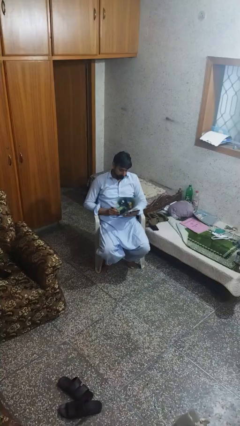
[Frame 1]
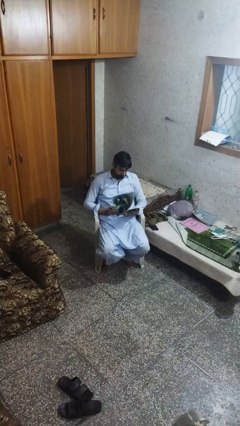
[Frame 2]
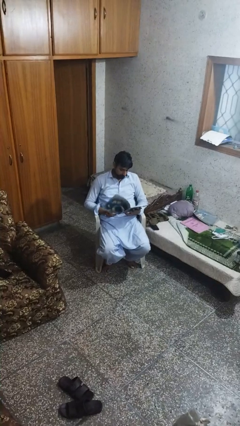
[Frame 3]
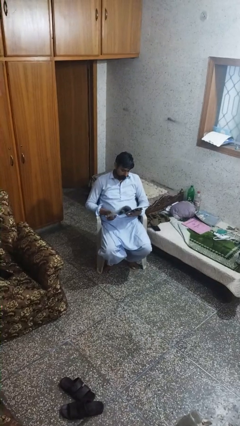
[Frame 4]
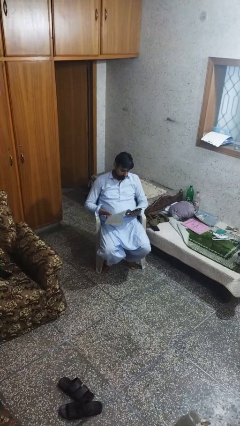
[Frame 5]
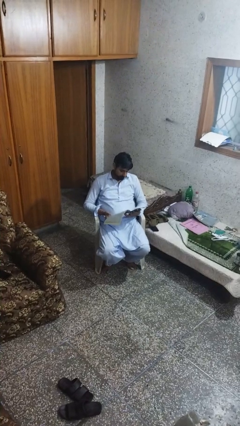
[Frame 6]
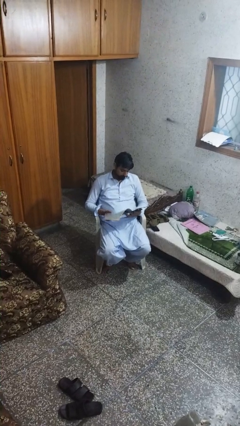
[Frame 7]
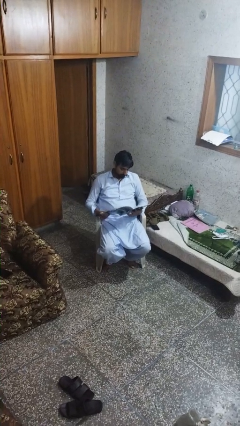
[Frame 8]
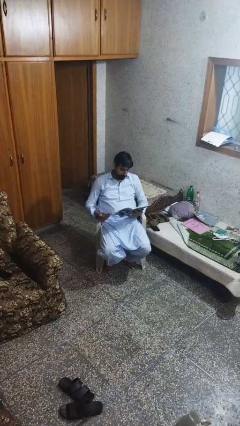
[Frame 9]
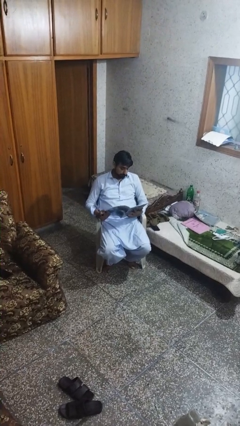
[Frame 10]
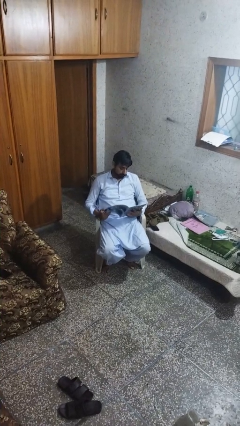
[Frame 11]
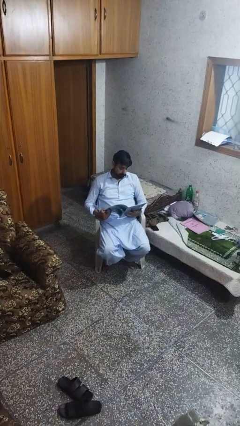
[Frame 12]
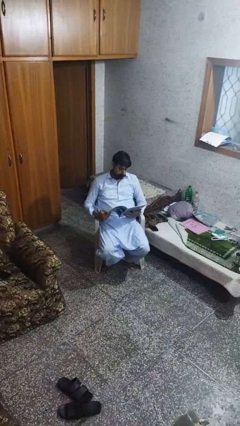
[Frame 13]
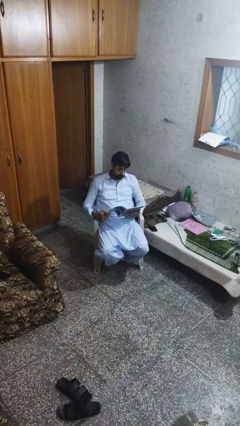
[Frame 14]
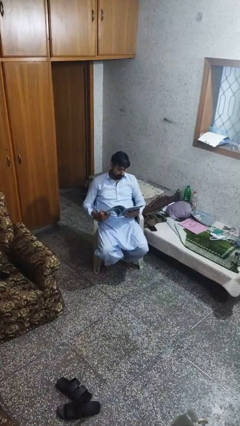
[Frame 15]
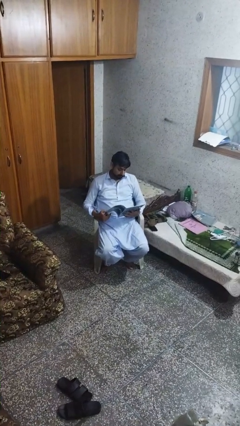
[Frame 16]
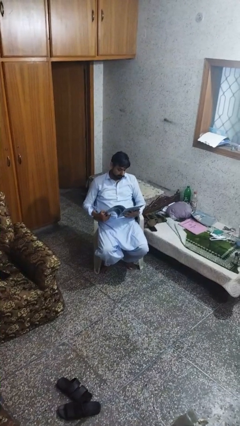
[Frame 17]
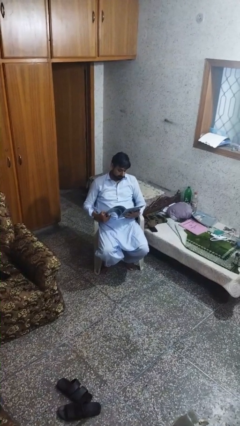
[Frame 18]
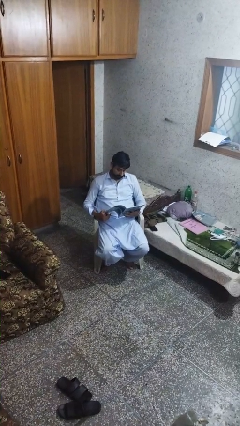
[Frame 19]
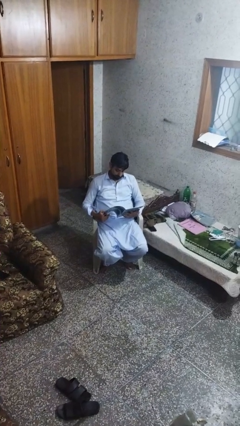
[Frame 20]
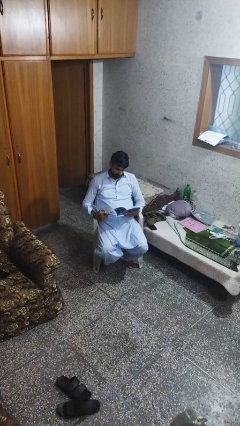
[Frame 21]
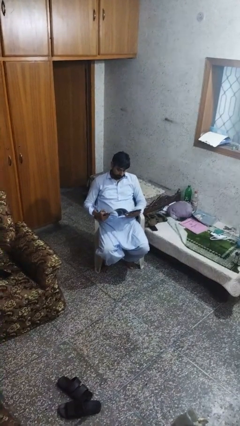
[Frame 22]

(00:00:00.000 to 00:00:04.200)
person reads magazine

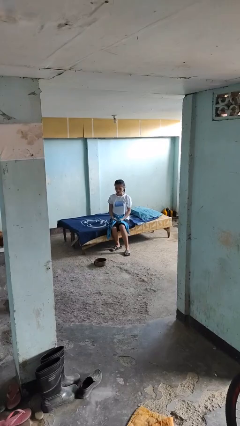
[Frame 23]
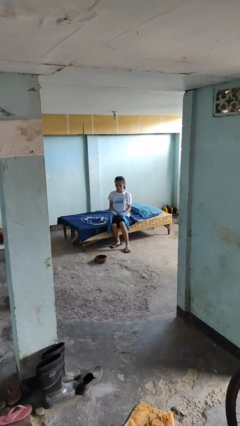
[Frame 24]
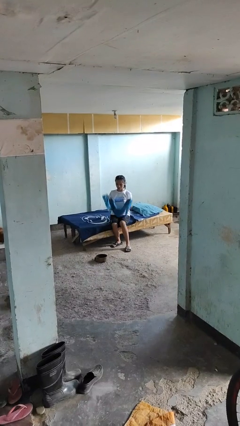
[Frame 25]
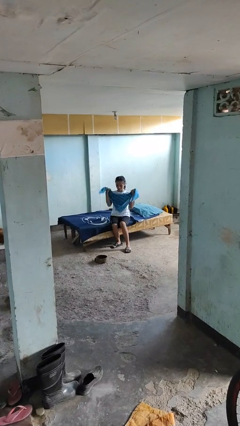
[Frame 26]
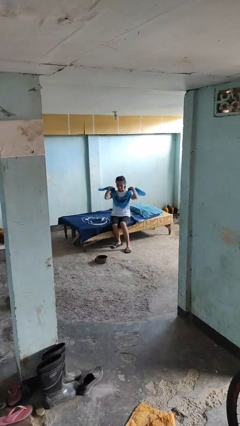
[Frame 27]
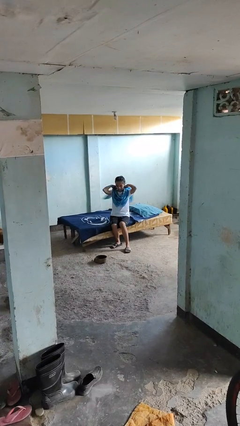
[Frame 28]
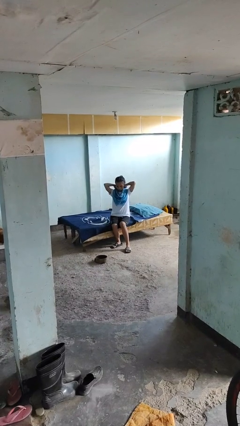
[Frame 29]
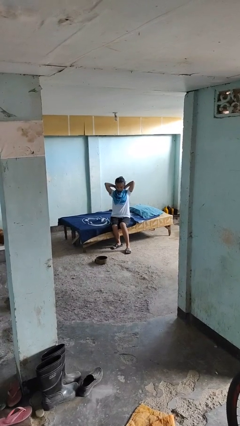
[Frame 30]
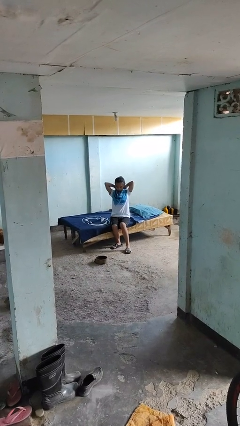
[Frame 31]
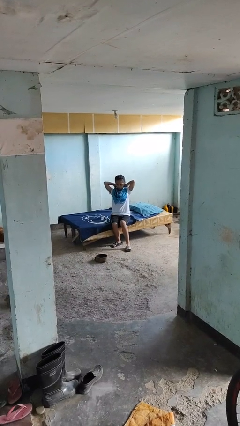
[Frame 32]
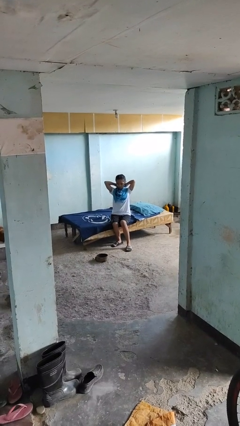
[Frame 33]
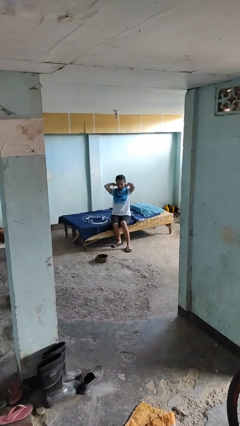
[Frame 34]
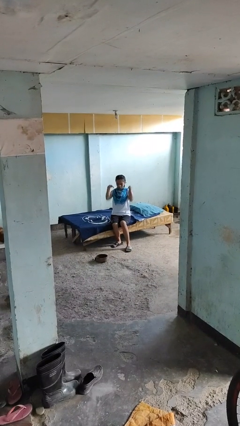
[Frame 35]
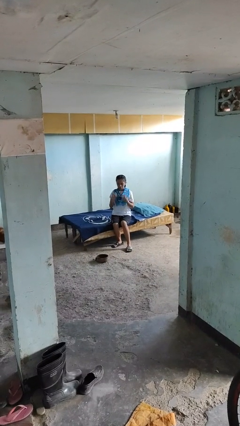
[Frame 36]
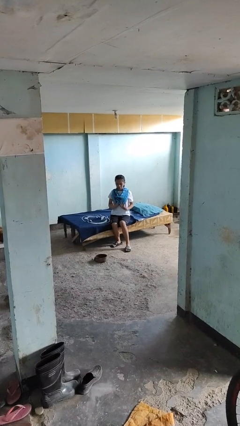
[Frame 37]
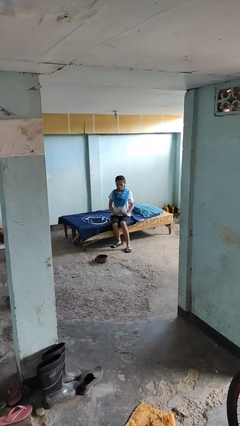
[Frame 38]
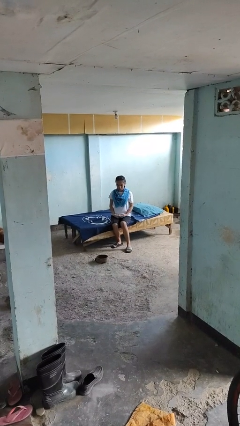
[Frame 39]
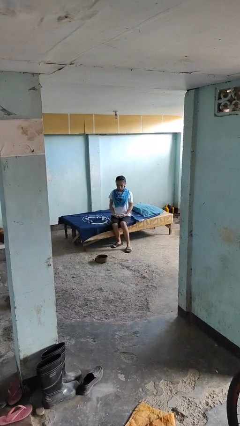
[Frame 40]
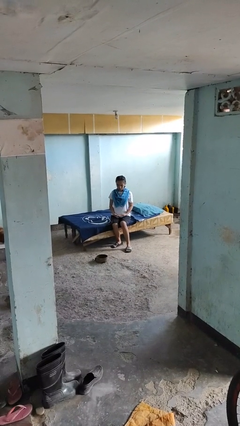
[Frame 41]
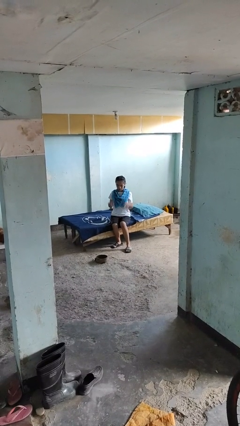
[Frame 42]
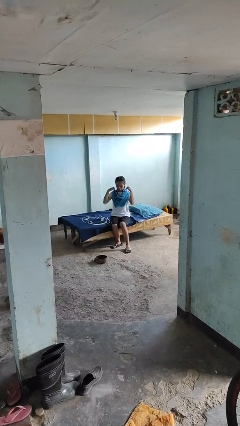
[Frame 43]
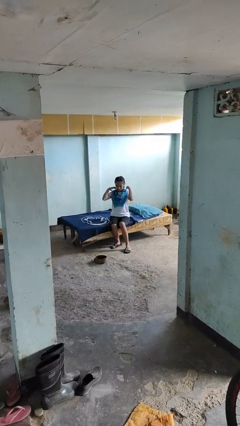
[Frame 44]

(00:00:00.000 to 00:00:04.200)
person puts on scarf

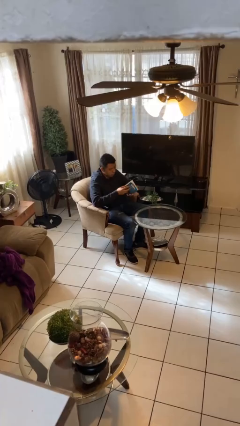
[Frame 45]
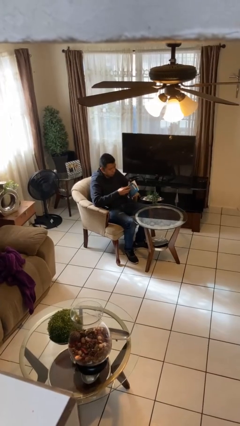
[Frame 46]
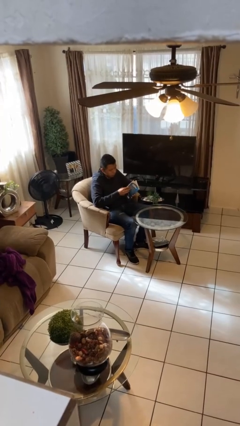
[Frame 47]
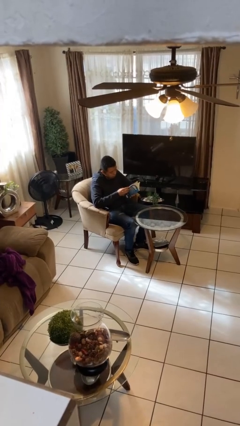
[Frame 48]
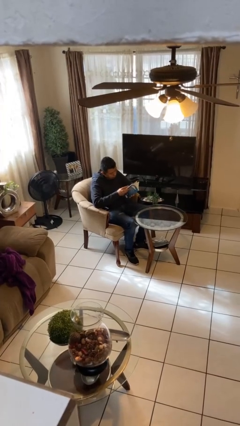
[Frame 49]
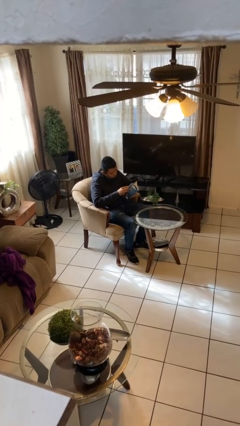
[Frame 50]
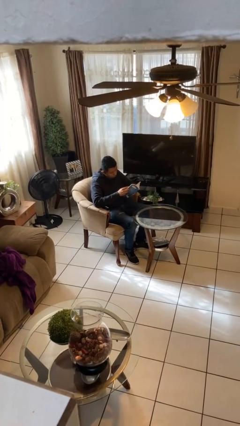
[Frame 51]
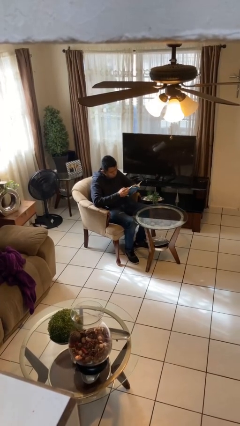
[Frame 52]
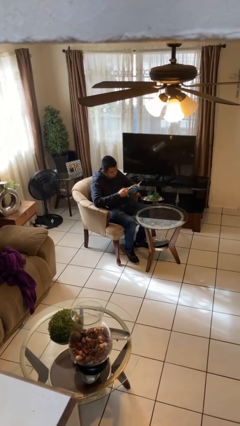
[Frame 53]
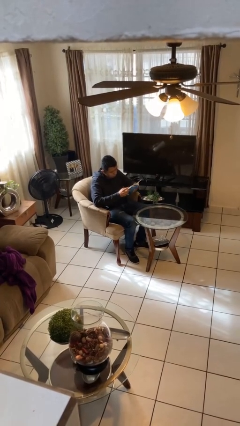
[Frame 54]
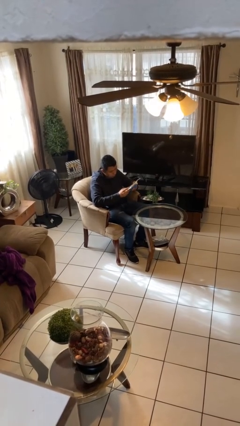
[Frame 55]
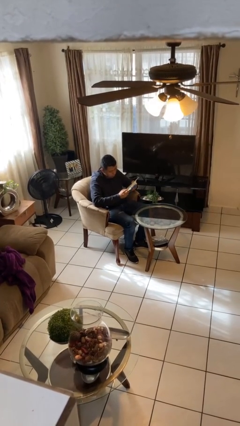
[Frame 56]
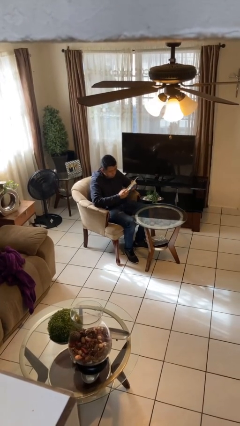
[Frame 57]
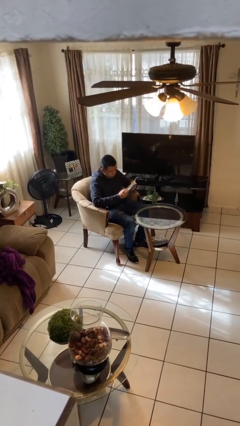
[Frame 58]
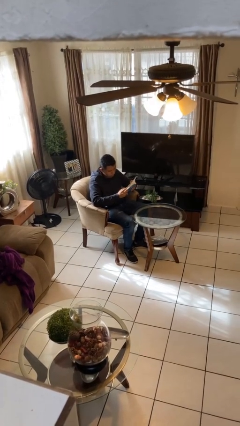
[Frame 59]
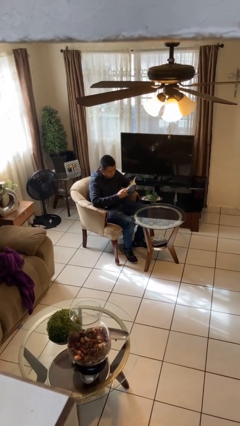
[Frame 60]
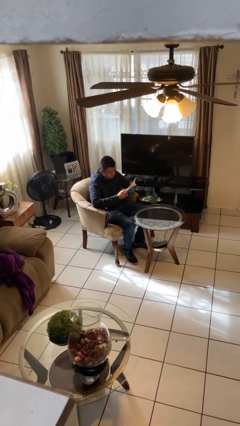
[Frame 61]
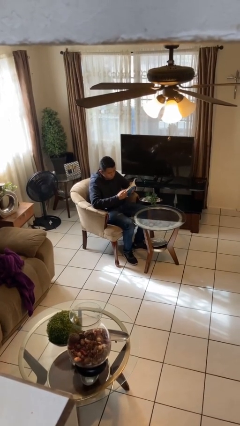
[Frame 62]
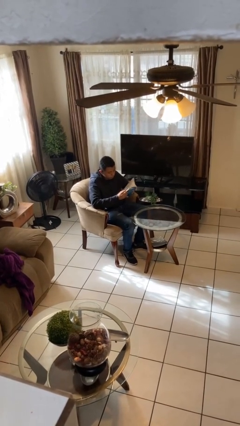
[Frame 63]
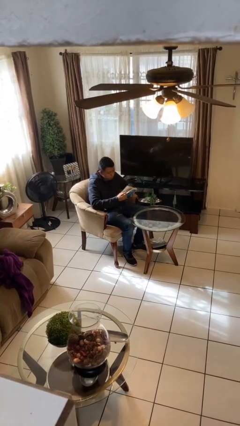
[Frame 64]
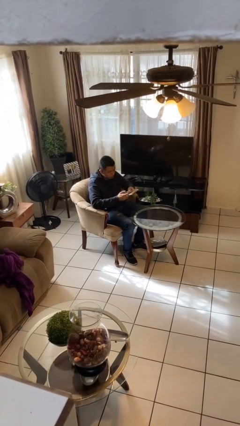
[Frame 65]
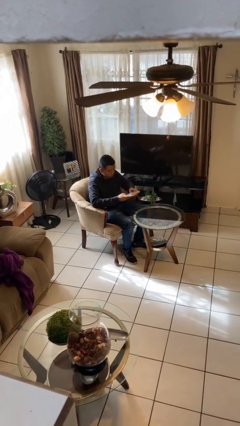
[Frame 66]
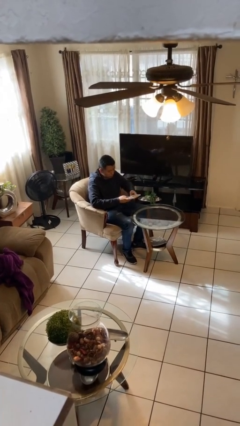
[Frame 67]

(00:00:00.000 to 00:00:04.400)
person reads document

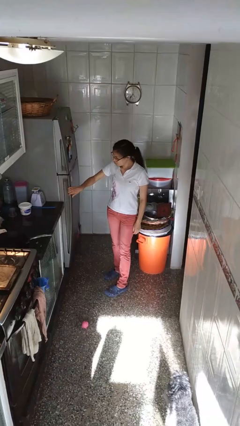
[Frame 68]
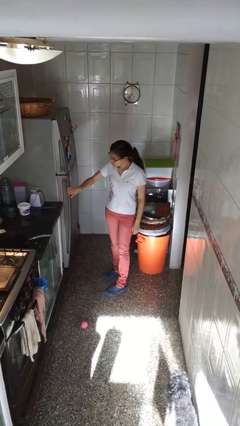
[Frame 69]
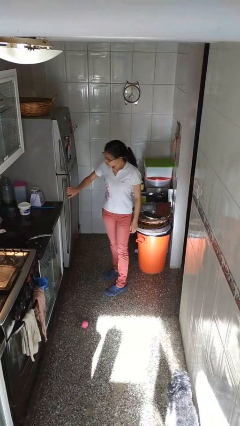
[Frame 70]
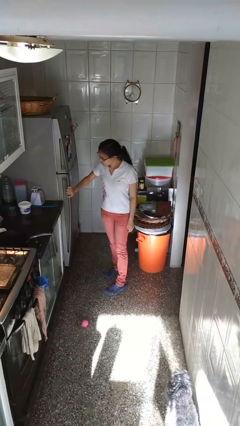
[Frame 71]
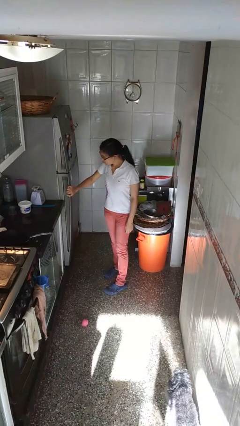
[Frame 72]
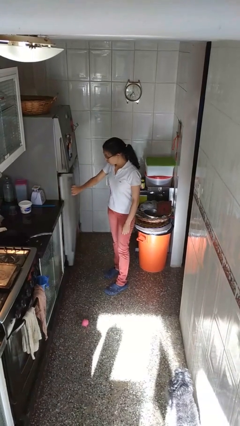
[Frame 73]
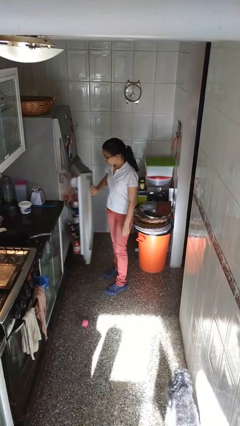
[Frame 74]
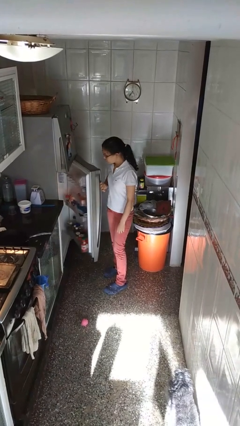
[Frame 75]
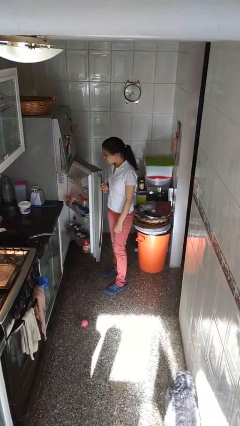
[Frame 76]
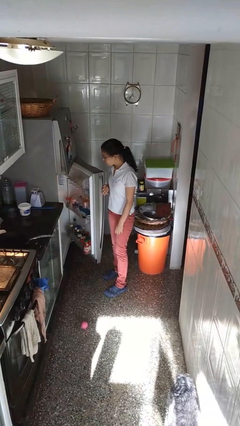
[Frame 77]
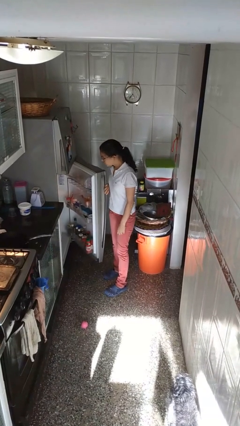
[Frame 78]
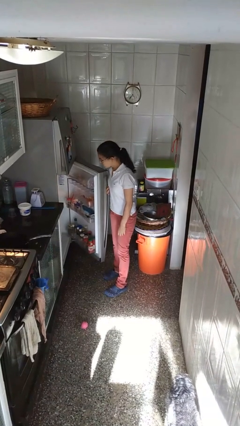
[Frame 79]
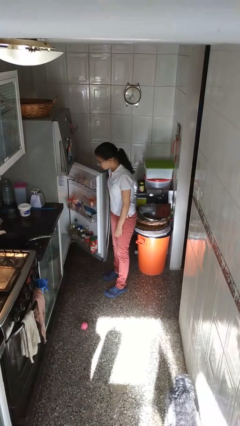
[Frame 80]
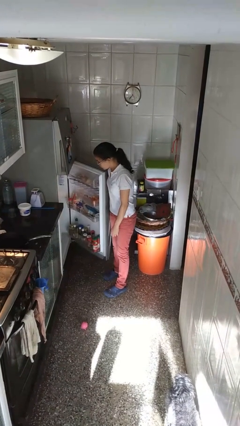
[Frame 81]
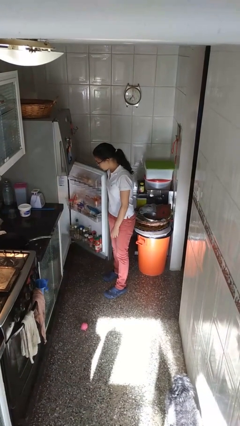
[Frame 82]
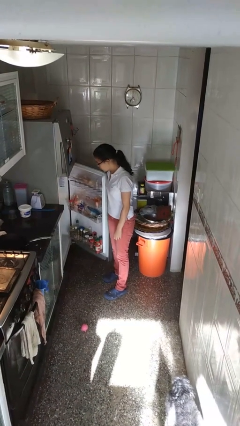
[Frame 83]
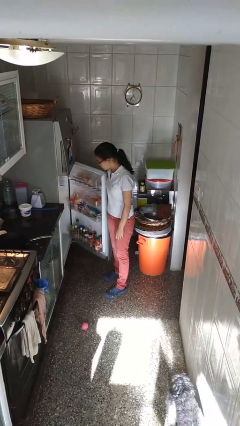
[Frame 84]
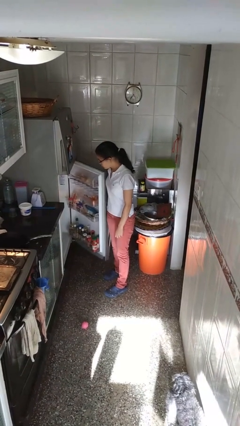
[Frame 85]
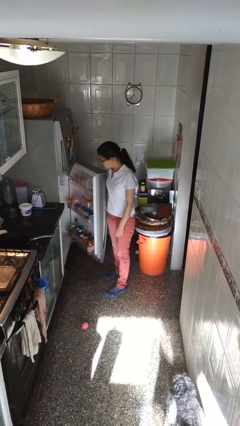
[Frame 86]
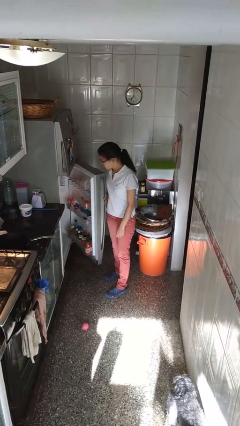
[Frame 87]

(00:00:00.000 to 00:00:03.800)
person opens refrigerator

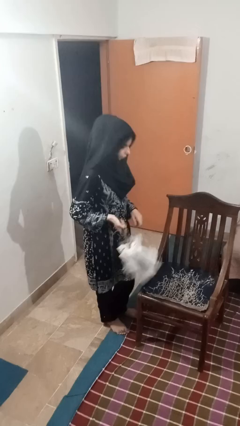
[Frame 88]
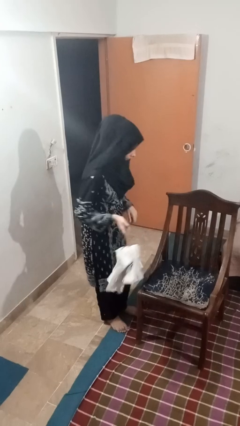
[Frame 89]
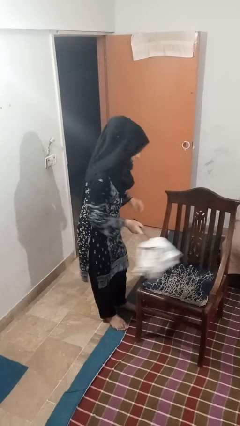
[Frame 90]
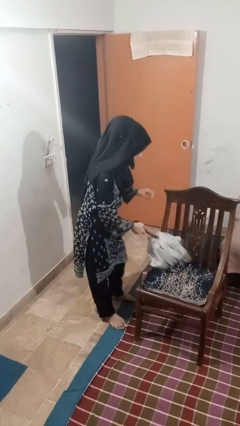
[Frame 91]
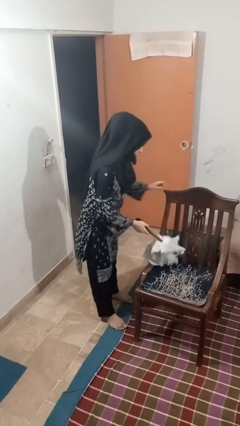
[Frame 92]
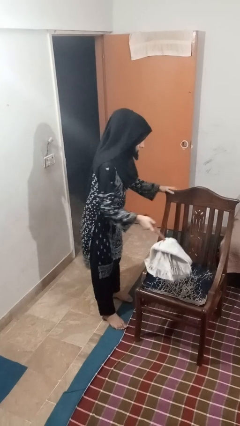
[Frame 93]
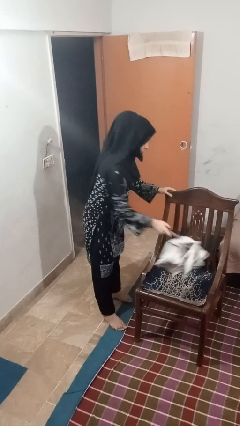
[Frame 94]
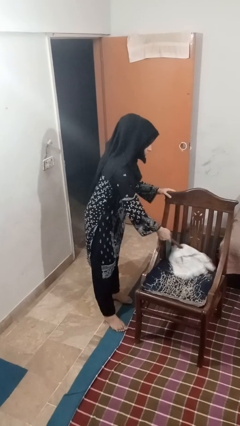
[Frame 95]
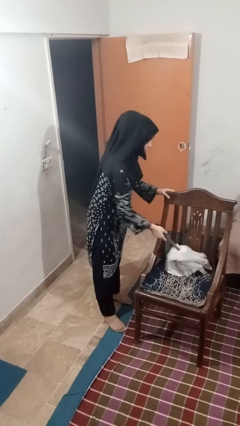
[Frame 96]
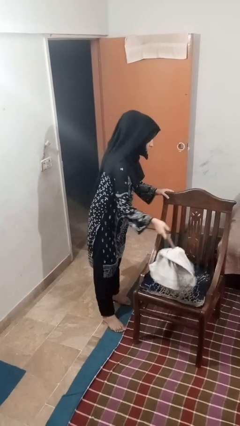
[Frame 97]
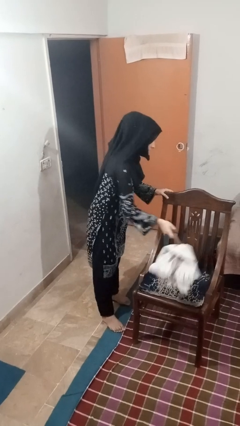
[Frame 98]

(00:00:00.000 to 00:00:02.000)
person dusts furniture
